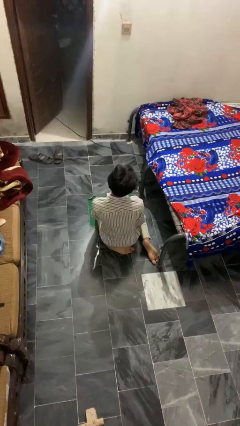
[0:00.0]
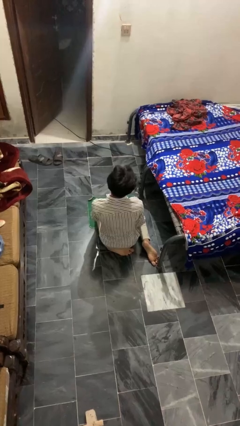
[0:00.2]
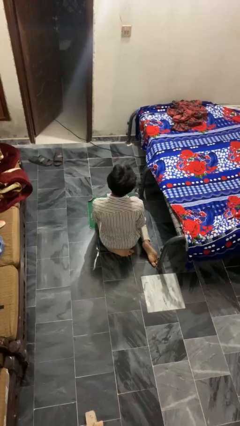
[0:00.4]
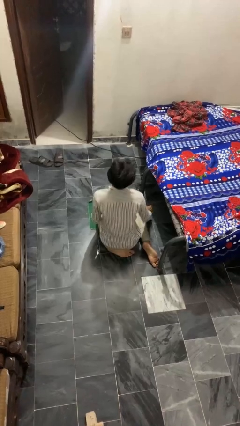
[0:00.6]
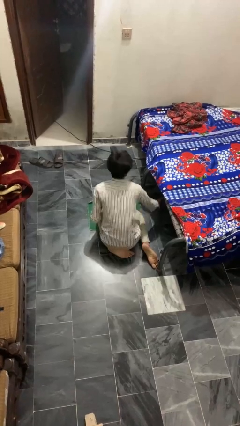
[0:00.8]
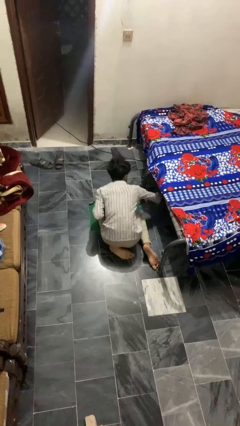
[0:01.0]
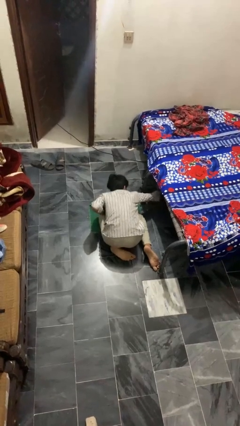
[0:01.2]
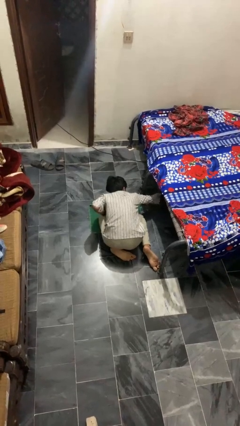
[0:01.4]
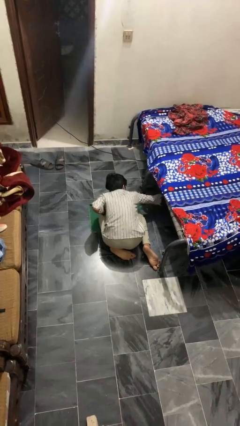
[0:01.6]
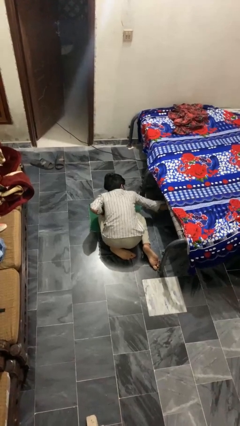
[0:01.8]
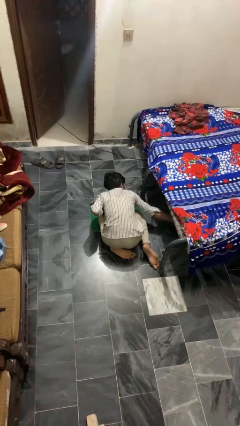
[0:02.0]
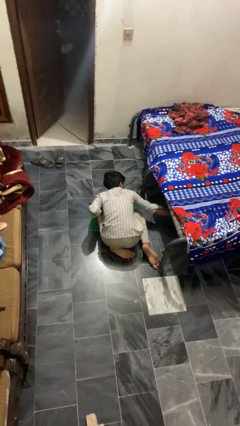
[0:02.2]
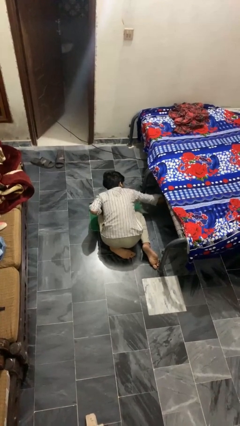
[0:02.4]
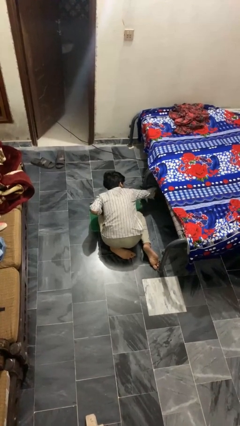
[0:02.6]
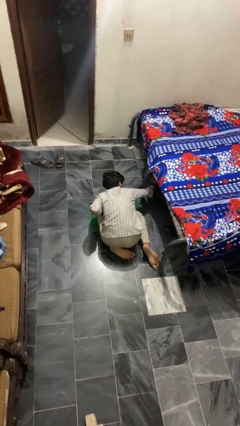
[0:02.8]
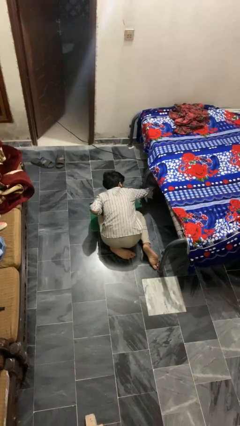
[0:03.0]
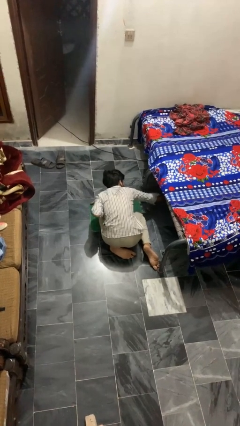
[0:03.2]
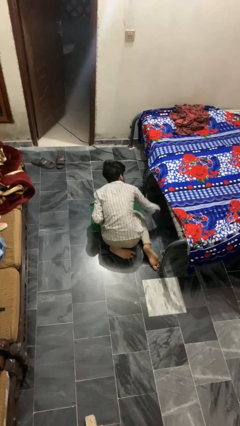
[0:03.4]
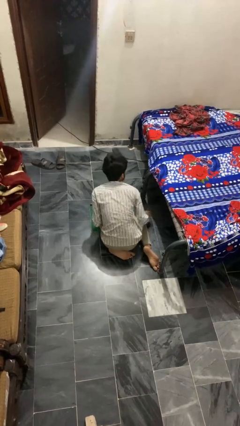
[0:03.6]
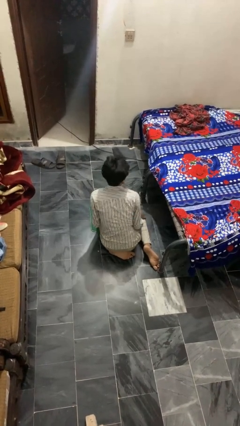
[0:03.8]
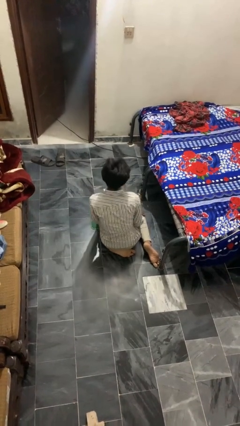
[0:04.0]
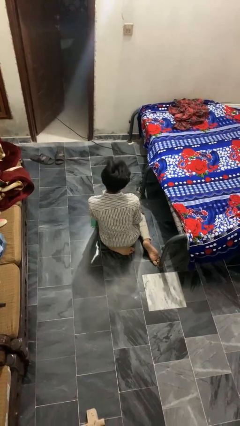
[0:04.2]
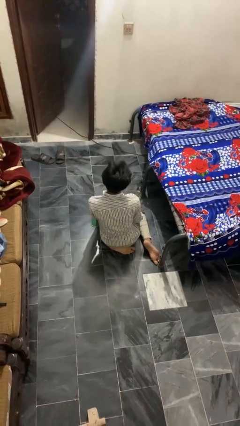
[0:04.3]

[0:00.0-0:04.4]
person searches under bed

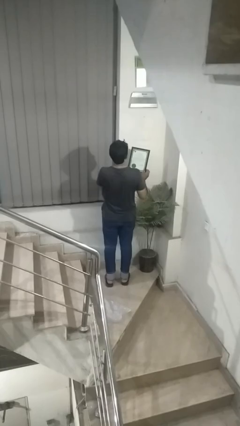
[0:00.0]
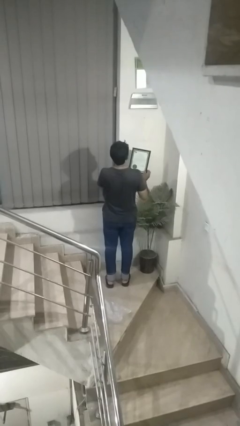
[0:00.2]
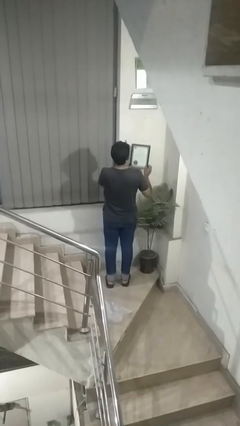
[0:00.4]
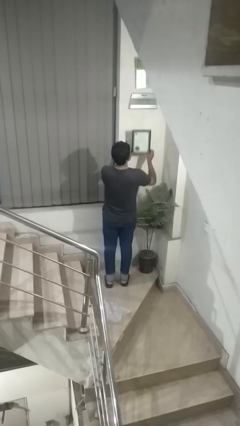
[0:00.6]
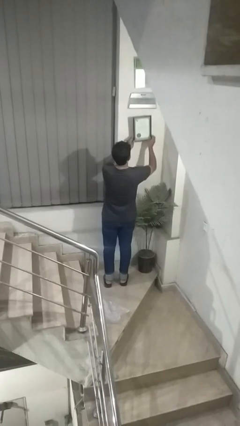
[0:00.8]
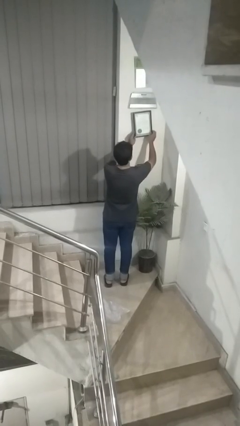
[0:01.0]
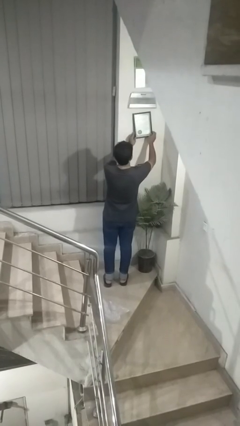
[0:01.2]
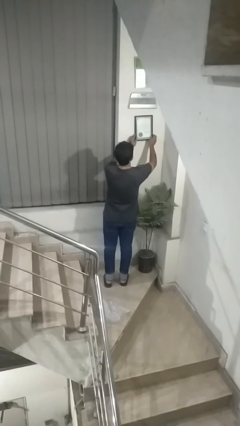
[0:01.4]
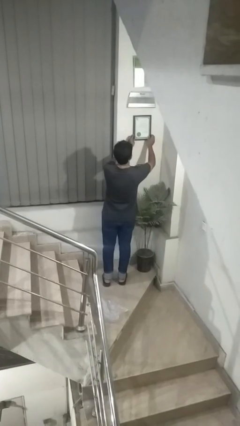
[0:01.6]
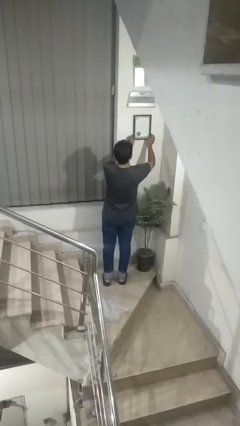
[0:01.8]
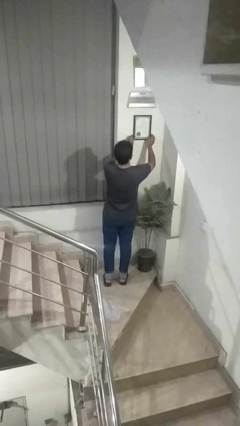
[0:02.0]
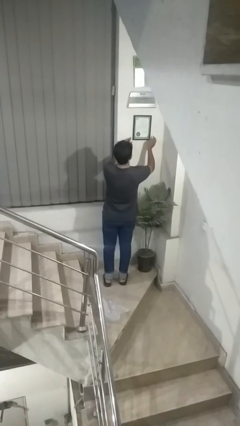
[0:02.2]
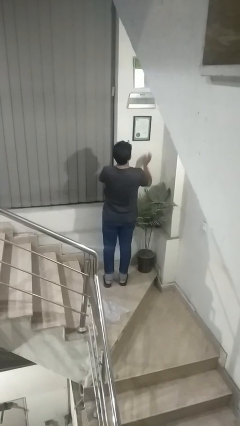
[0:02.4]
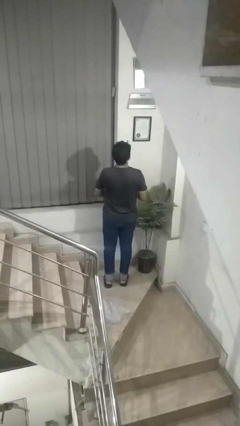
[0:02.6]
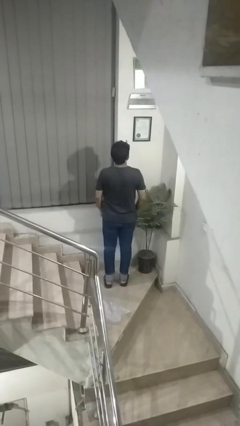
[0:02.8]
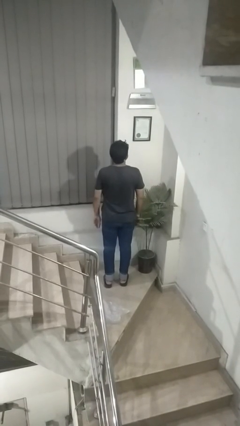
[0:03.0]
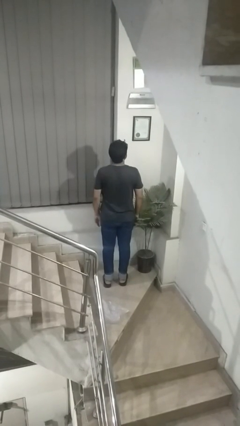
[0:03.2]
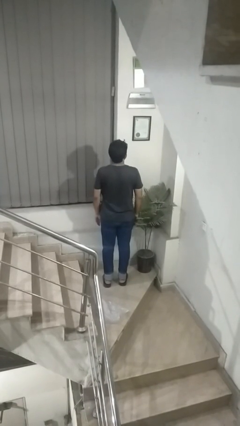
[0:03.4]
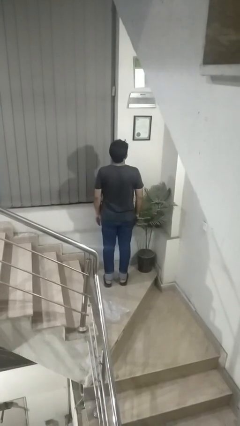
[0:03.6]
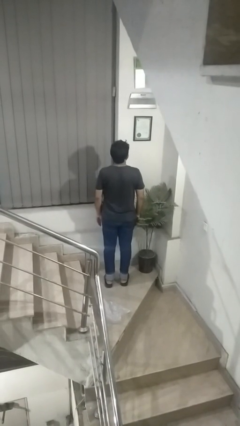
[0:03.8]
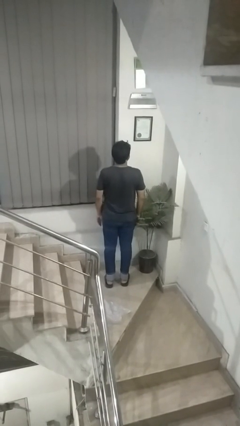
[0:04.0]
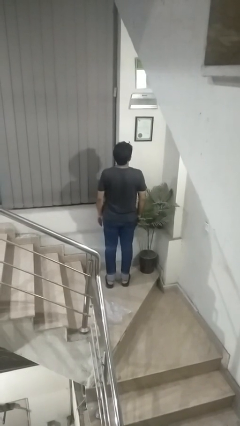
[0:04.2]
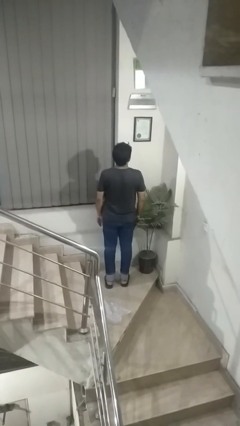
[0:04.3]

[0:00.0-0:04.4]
person puts up picture frame

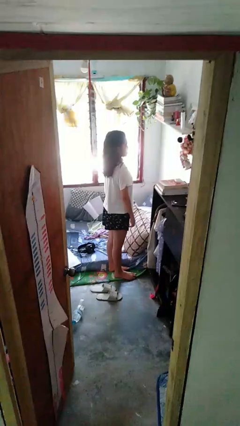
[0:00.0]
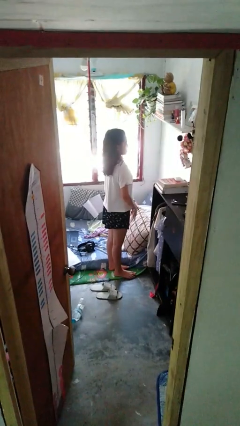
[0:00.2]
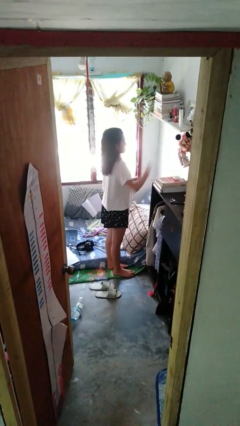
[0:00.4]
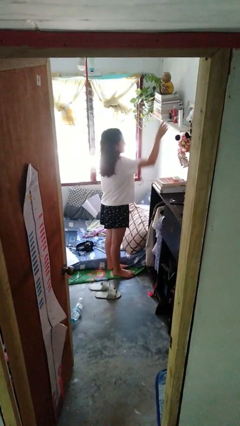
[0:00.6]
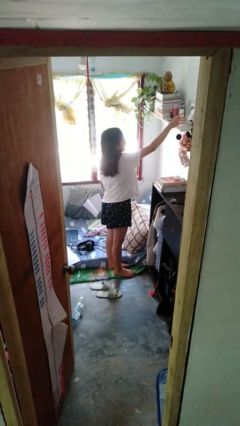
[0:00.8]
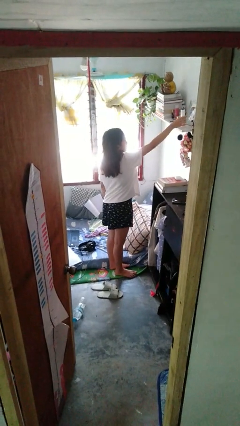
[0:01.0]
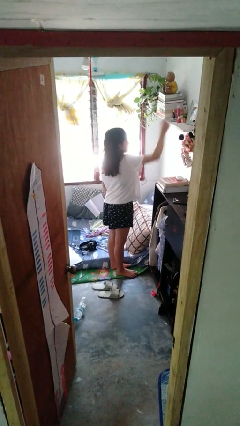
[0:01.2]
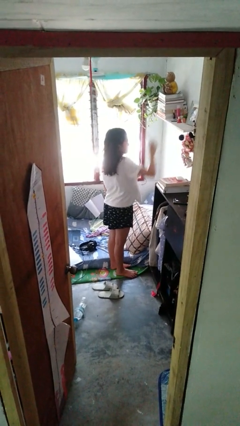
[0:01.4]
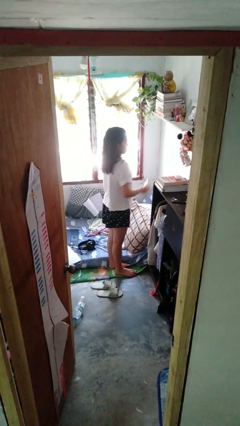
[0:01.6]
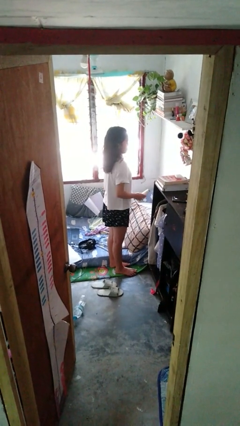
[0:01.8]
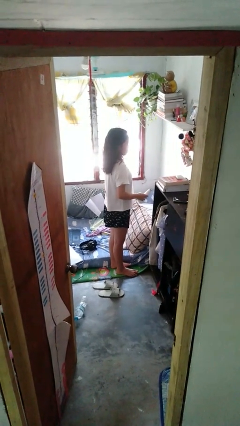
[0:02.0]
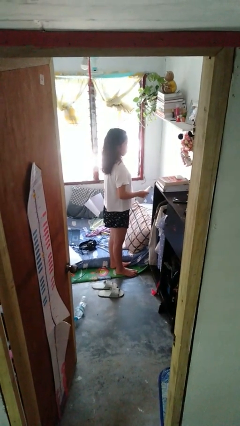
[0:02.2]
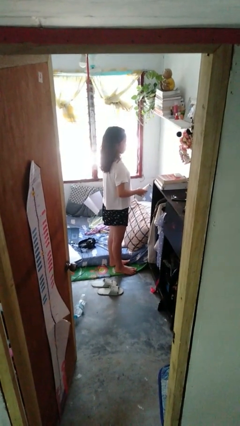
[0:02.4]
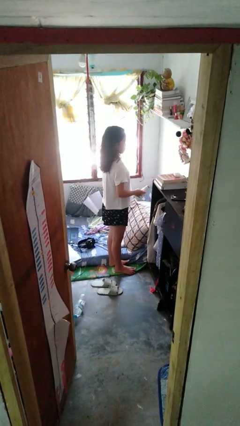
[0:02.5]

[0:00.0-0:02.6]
person picks up object from shelf

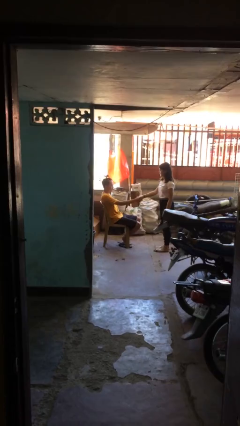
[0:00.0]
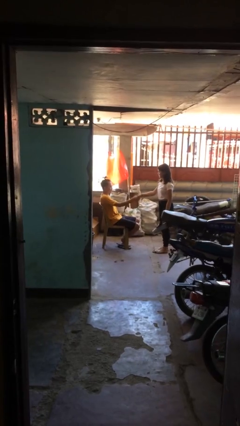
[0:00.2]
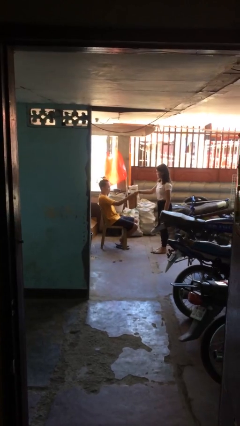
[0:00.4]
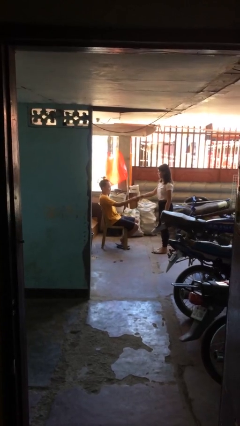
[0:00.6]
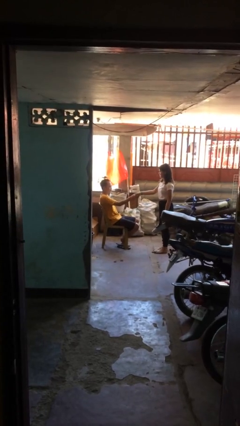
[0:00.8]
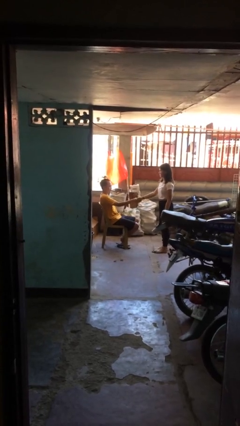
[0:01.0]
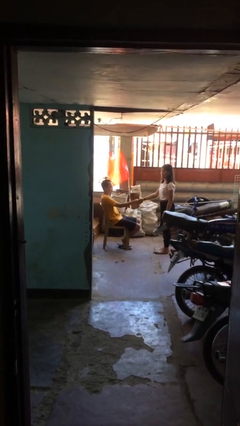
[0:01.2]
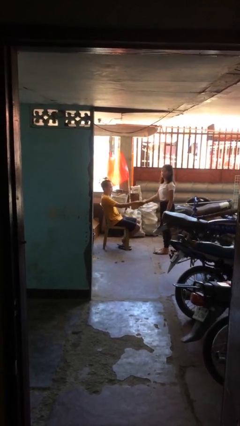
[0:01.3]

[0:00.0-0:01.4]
person shakes hand

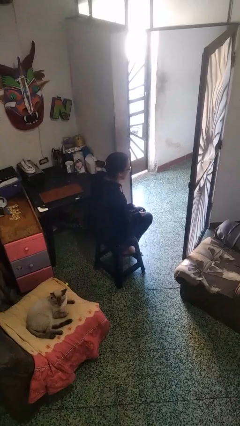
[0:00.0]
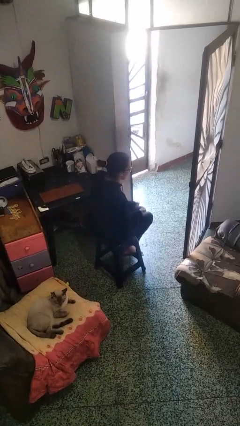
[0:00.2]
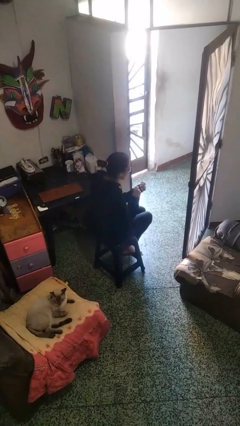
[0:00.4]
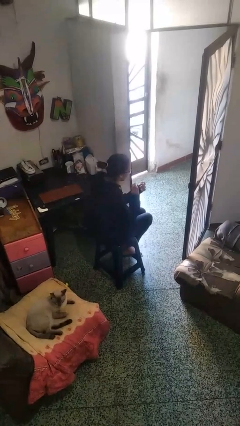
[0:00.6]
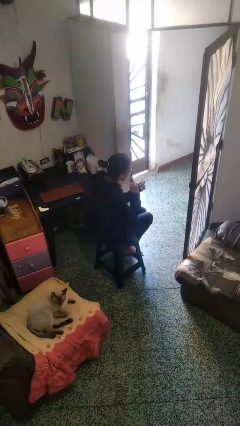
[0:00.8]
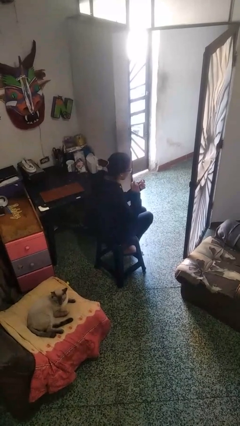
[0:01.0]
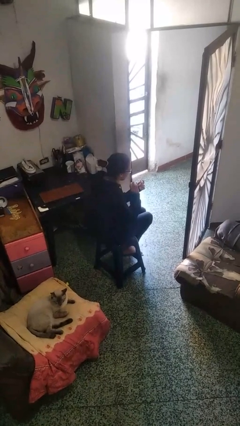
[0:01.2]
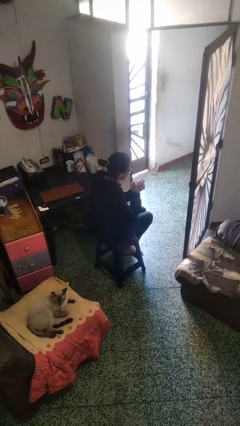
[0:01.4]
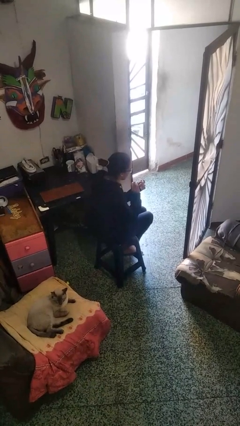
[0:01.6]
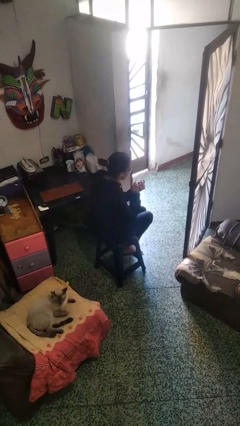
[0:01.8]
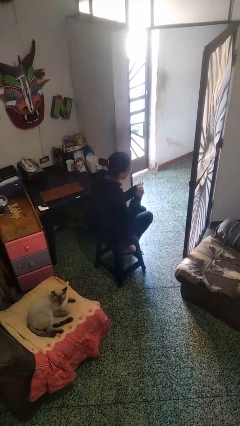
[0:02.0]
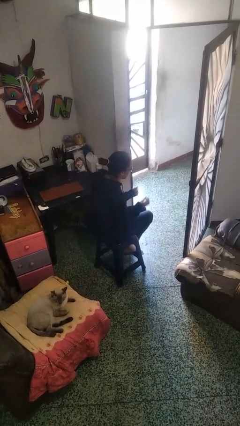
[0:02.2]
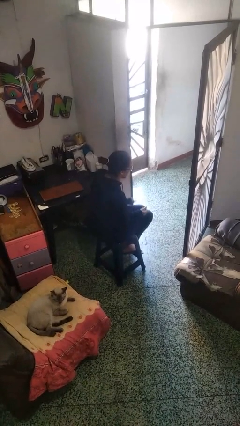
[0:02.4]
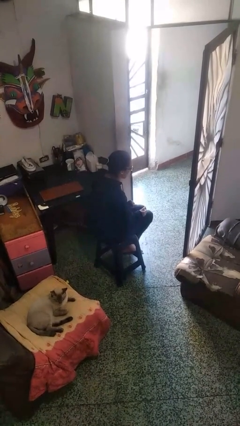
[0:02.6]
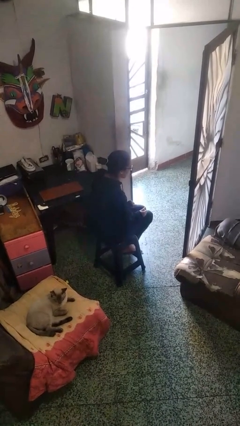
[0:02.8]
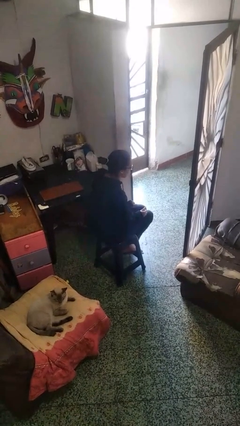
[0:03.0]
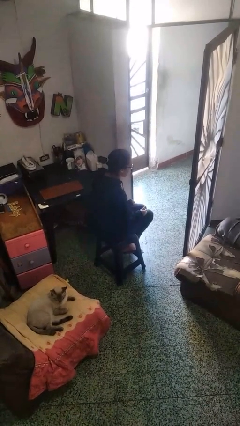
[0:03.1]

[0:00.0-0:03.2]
person clips fingernails

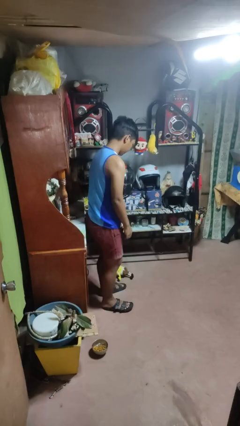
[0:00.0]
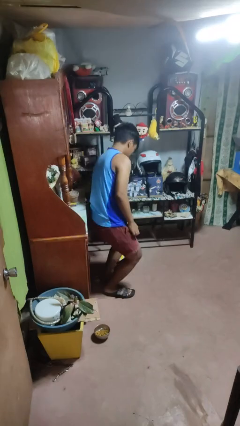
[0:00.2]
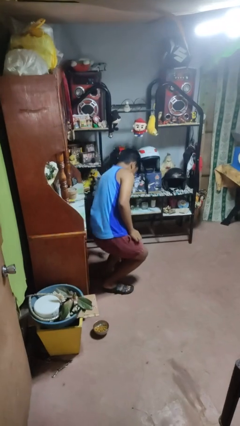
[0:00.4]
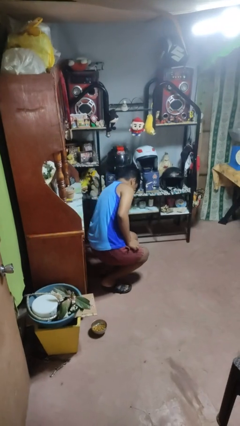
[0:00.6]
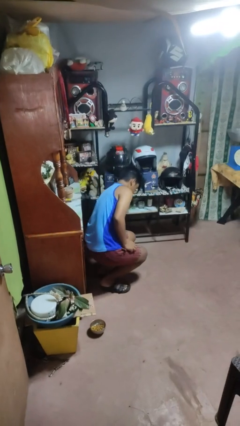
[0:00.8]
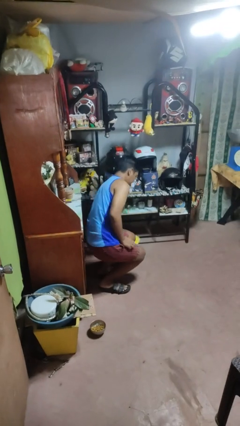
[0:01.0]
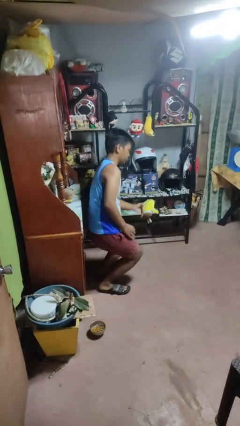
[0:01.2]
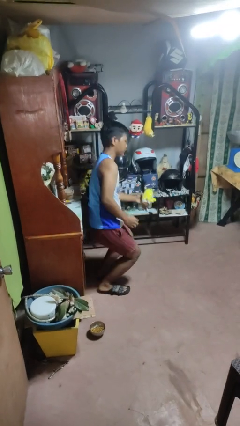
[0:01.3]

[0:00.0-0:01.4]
person picks up object from floor
